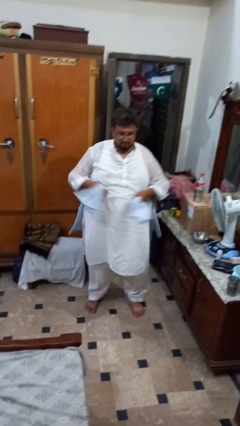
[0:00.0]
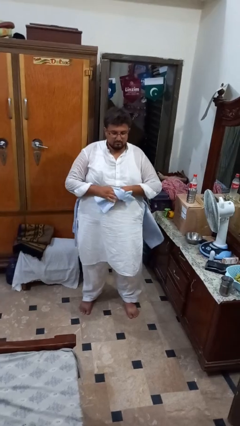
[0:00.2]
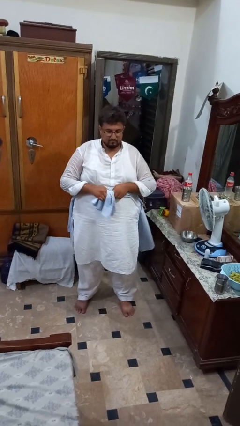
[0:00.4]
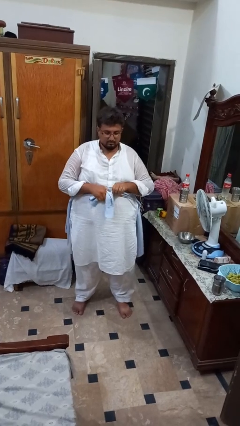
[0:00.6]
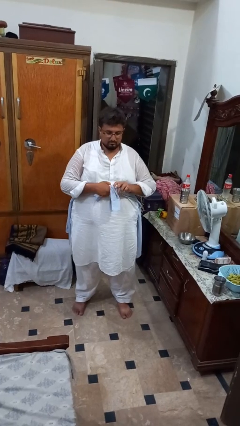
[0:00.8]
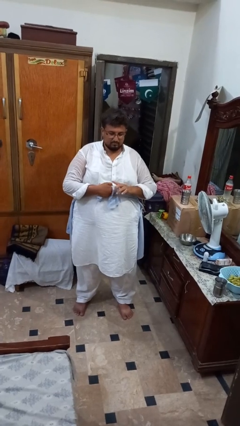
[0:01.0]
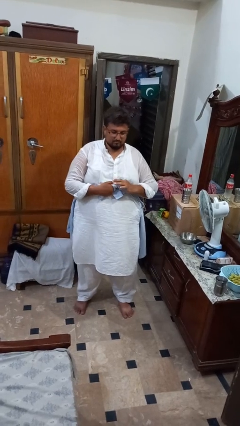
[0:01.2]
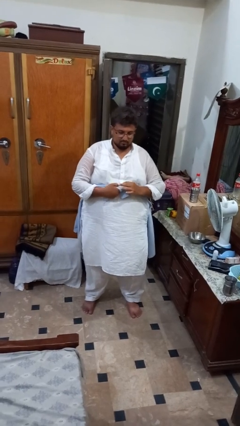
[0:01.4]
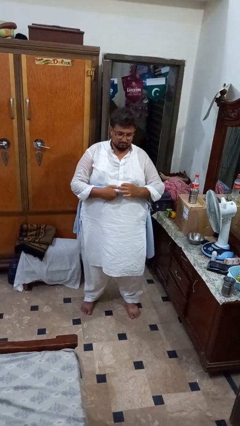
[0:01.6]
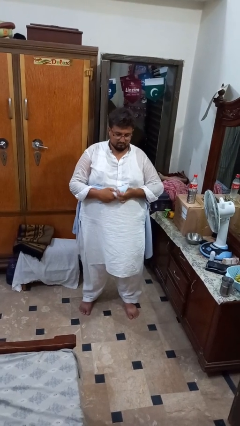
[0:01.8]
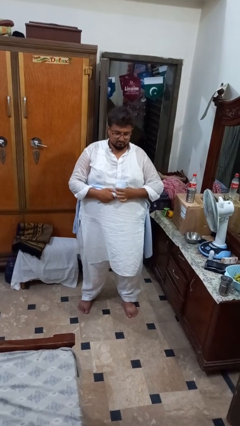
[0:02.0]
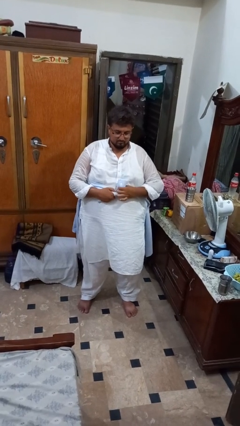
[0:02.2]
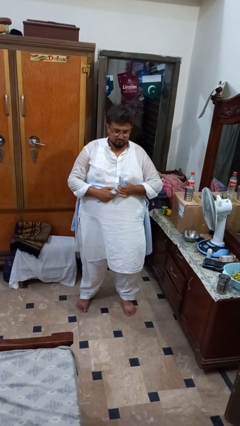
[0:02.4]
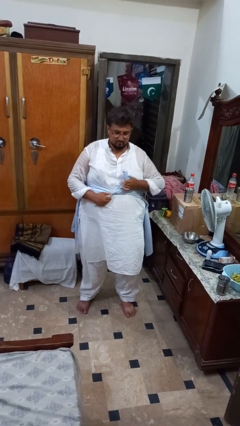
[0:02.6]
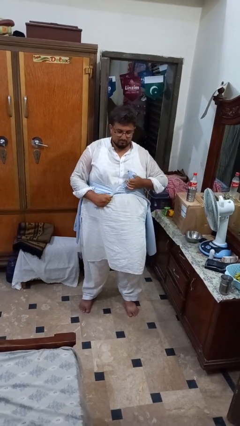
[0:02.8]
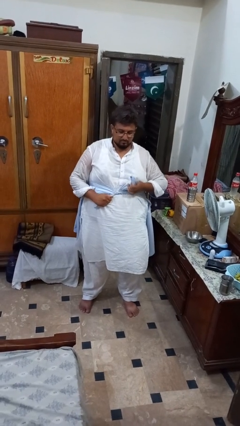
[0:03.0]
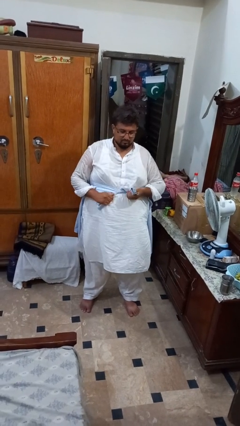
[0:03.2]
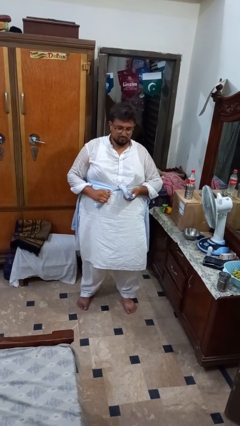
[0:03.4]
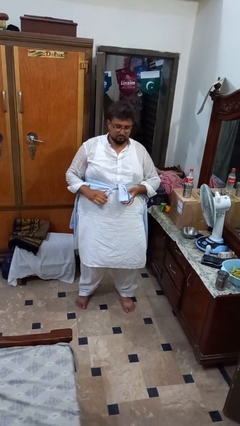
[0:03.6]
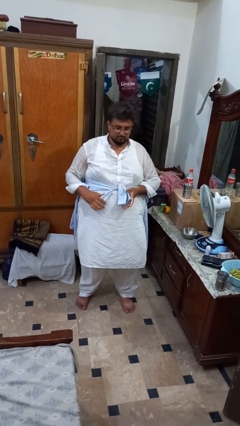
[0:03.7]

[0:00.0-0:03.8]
person ties jacket around waist

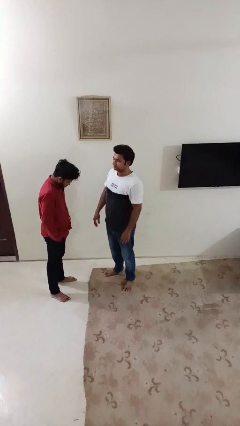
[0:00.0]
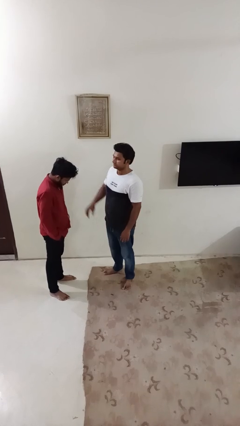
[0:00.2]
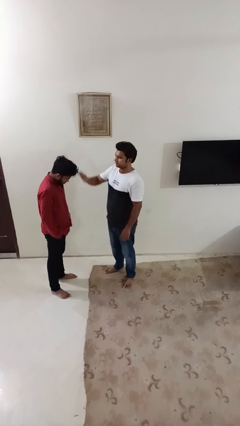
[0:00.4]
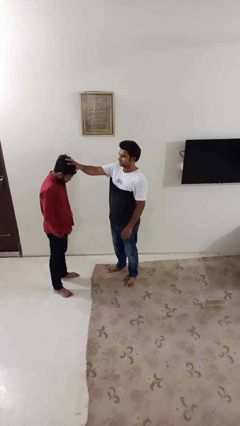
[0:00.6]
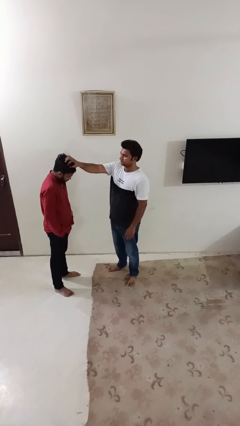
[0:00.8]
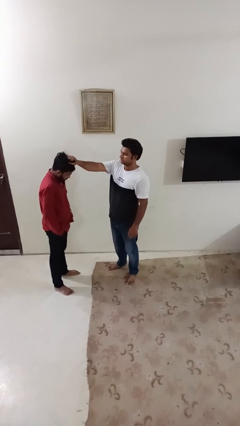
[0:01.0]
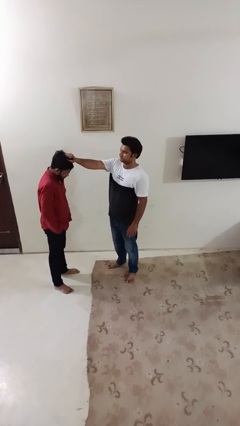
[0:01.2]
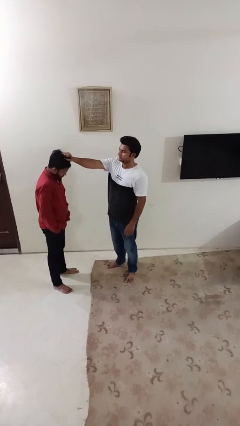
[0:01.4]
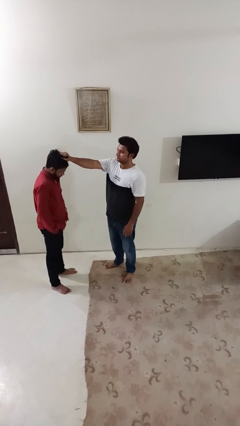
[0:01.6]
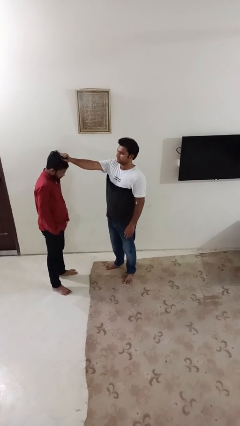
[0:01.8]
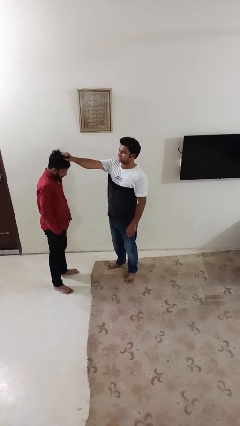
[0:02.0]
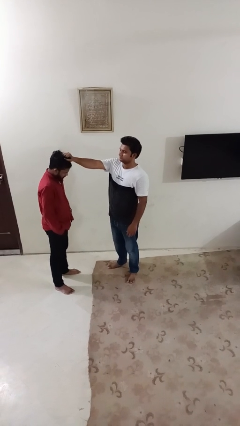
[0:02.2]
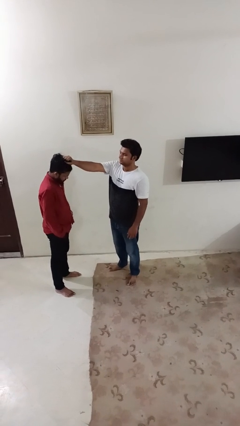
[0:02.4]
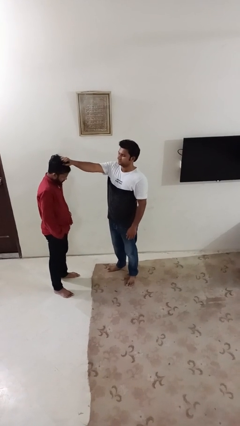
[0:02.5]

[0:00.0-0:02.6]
person grabs person by hair

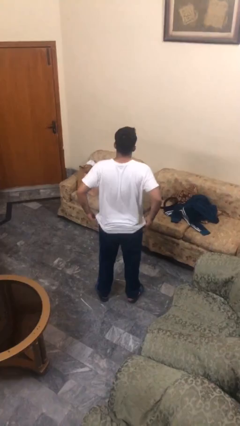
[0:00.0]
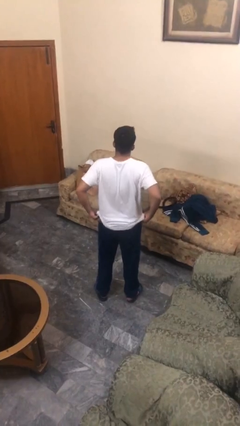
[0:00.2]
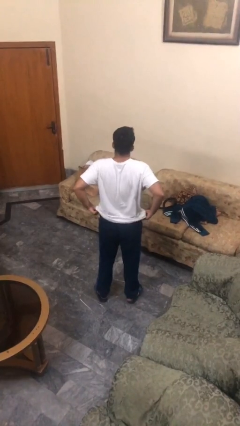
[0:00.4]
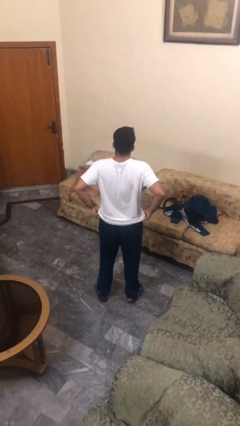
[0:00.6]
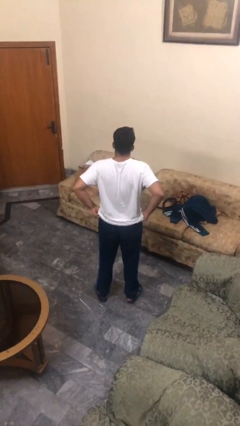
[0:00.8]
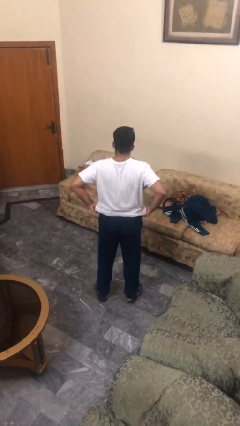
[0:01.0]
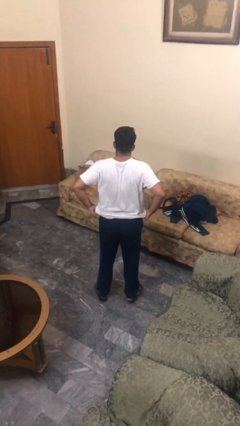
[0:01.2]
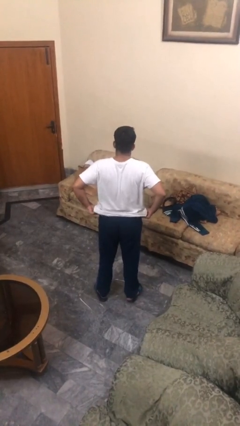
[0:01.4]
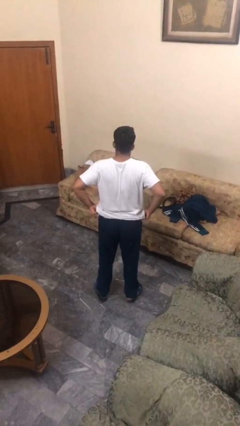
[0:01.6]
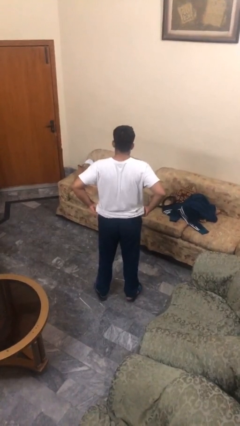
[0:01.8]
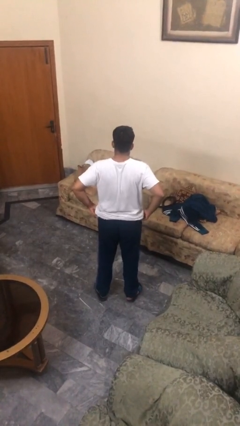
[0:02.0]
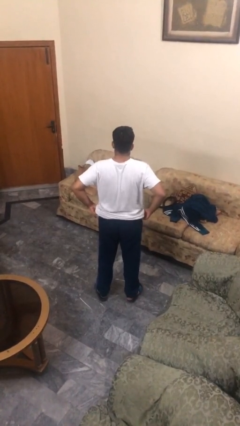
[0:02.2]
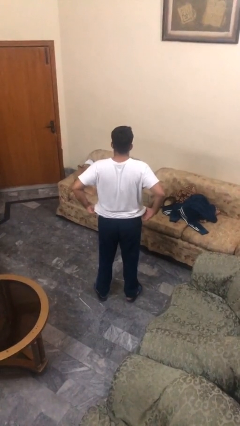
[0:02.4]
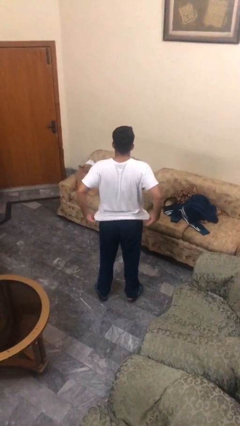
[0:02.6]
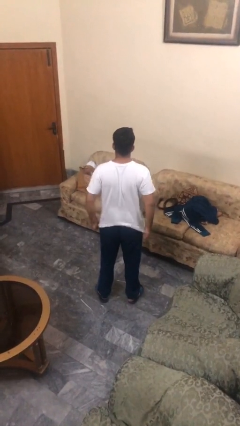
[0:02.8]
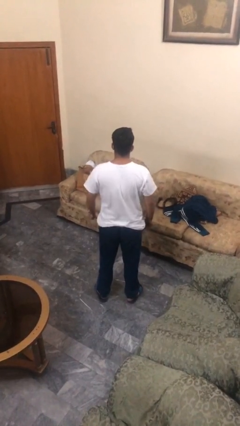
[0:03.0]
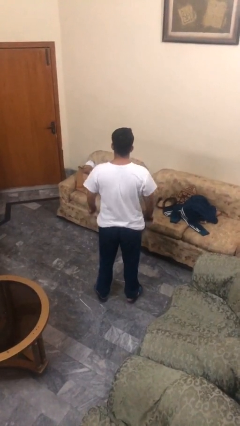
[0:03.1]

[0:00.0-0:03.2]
person hikes up pants

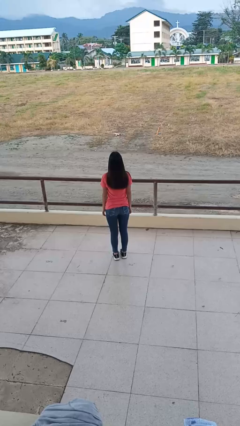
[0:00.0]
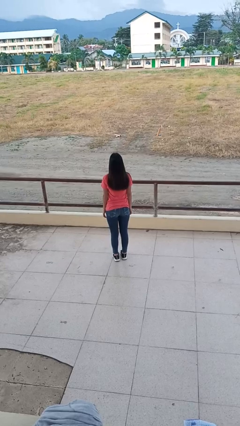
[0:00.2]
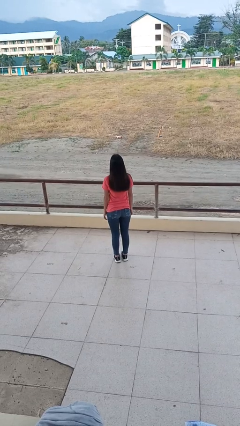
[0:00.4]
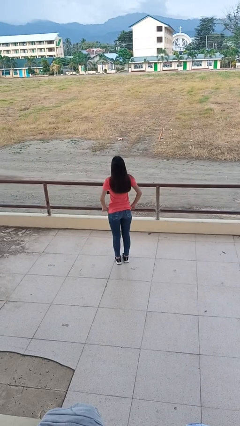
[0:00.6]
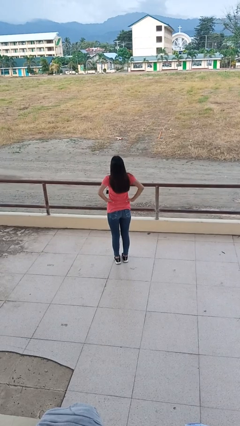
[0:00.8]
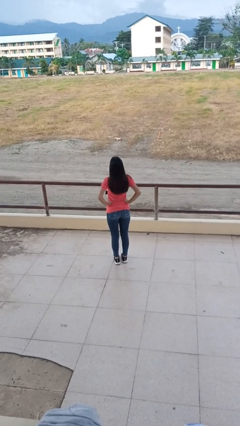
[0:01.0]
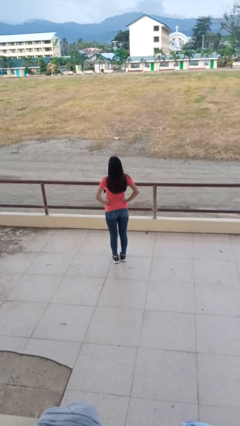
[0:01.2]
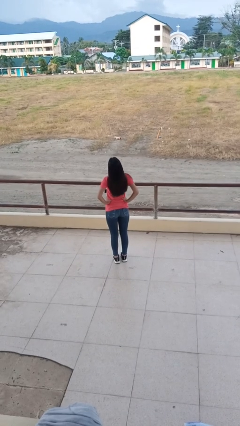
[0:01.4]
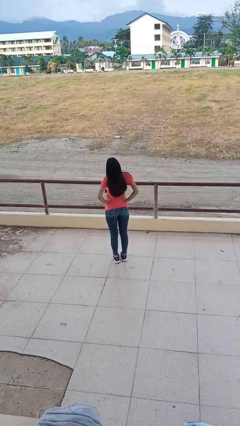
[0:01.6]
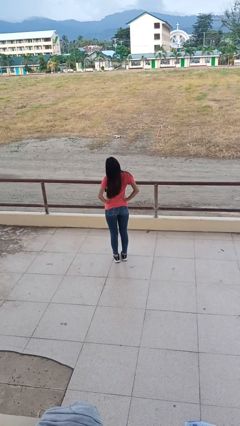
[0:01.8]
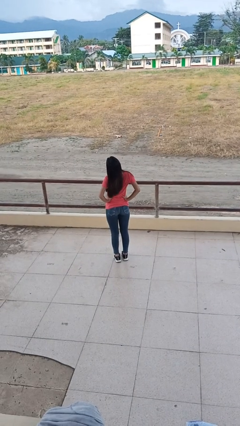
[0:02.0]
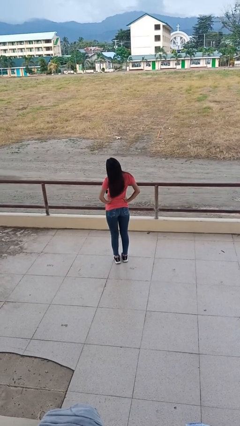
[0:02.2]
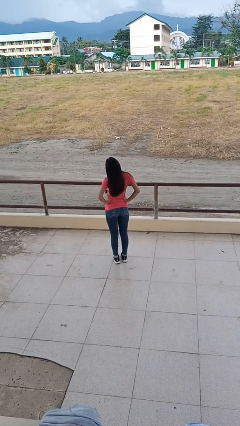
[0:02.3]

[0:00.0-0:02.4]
person stretches back

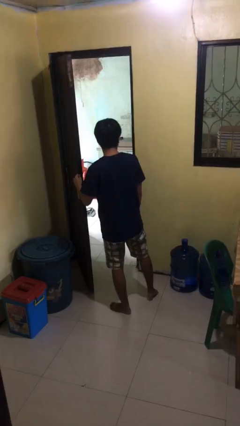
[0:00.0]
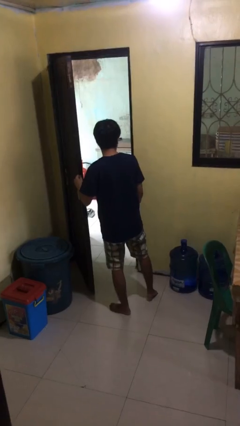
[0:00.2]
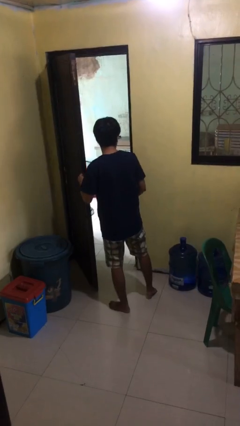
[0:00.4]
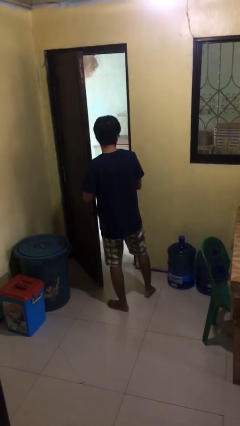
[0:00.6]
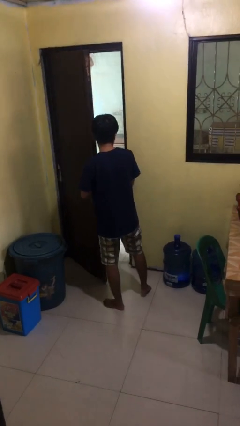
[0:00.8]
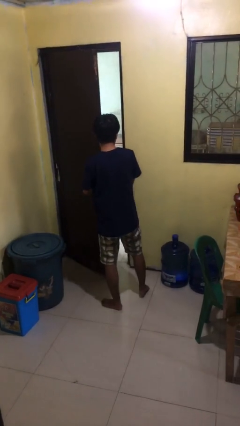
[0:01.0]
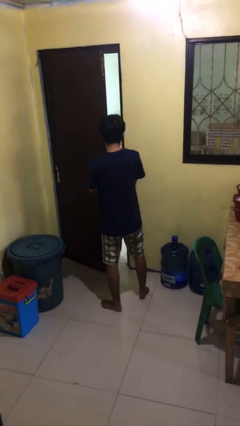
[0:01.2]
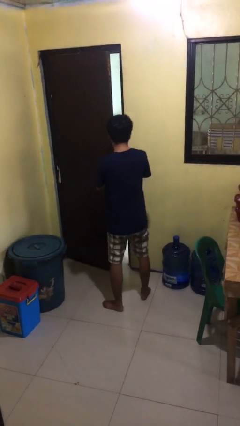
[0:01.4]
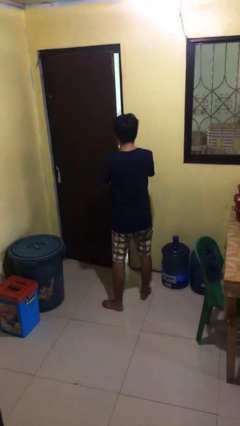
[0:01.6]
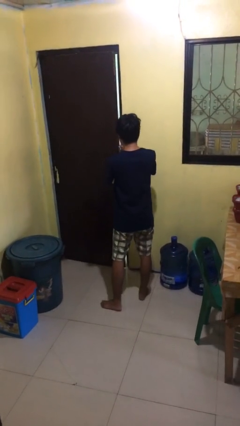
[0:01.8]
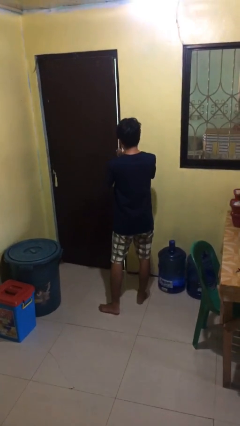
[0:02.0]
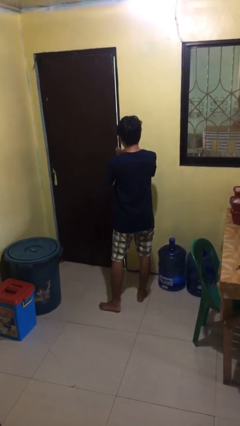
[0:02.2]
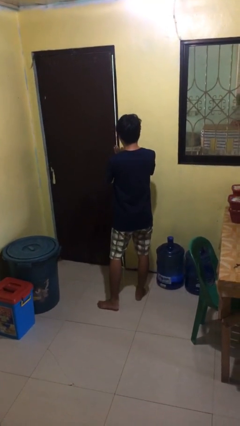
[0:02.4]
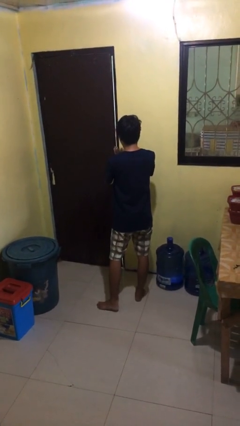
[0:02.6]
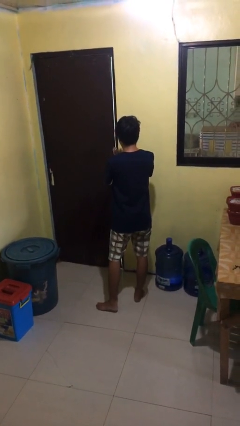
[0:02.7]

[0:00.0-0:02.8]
person closes facility door

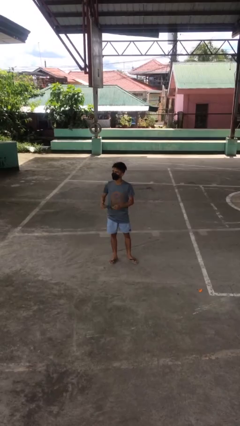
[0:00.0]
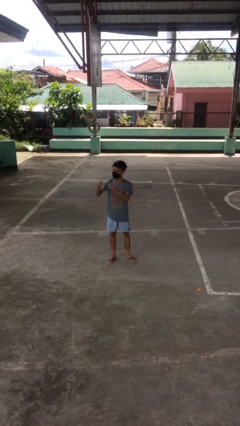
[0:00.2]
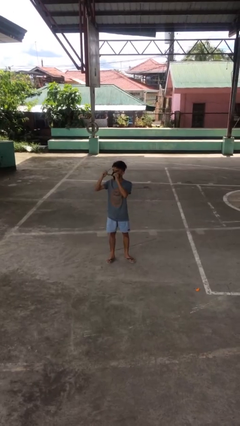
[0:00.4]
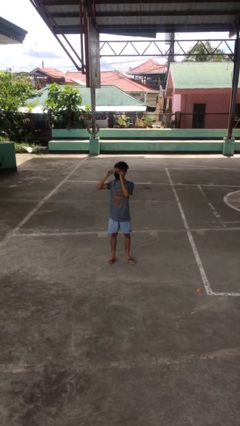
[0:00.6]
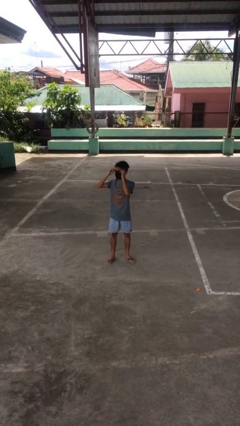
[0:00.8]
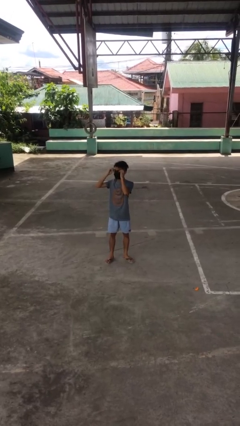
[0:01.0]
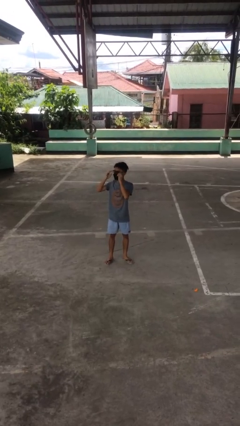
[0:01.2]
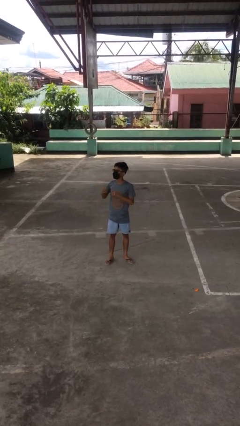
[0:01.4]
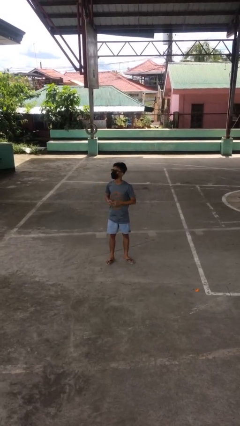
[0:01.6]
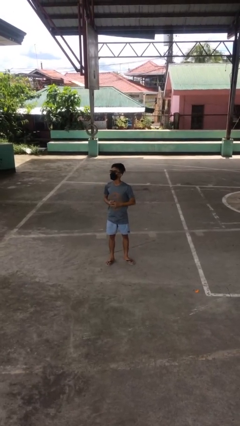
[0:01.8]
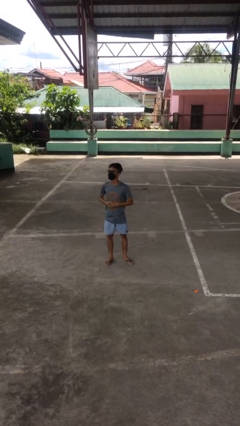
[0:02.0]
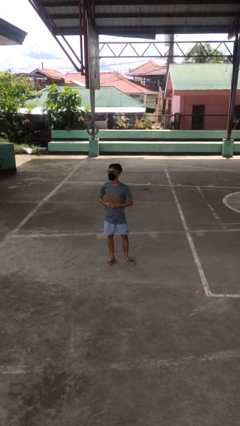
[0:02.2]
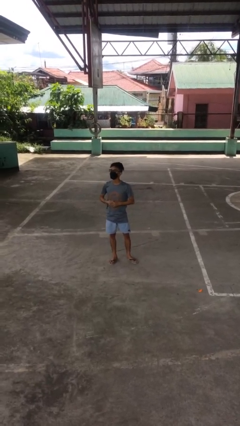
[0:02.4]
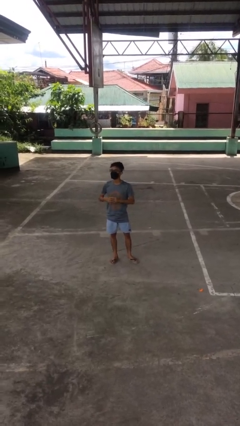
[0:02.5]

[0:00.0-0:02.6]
person puts on glasses
